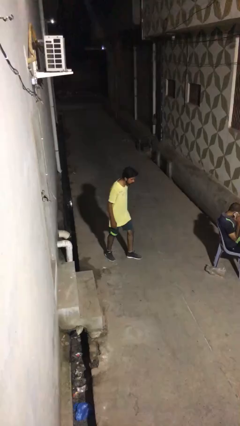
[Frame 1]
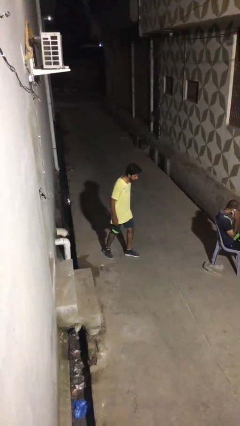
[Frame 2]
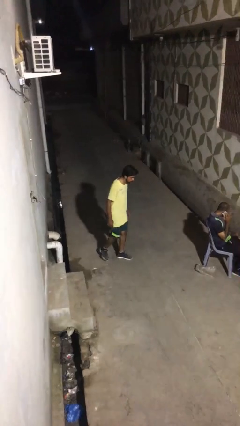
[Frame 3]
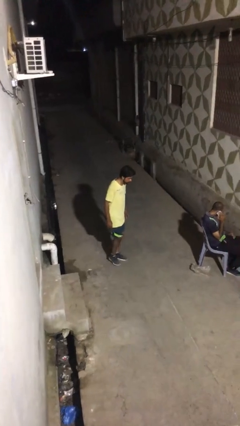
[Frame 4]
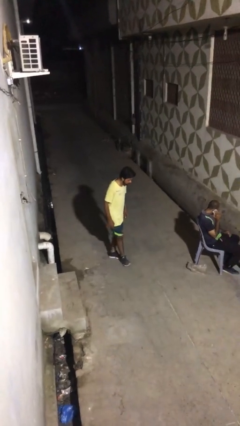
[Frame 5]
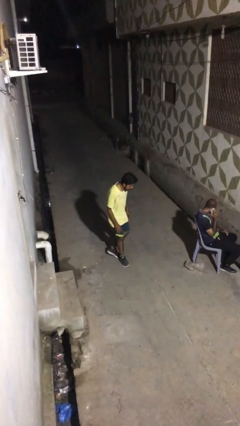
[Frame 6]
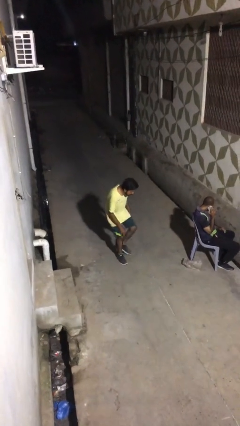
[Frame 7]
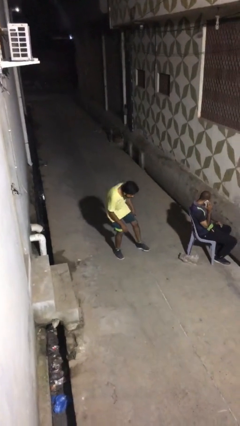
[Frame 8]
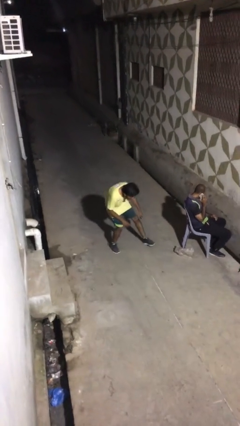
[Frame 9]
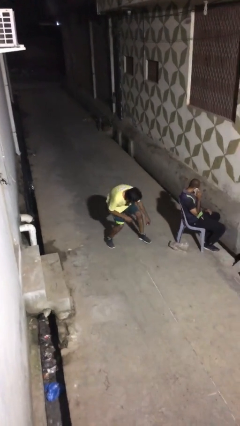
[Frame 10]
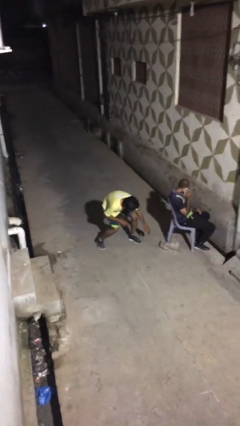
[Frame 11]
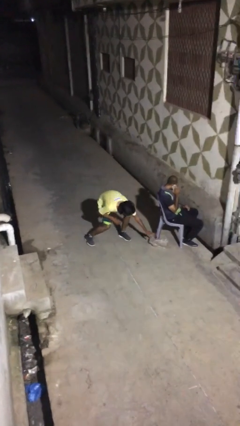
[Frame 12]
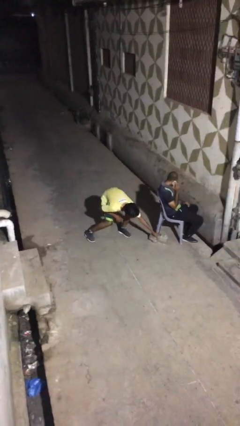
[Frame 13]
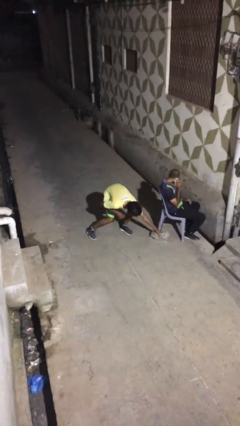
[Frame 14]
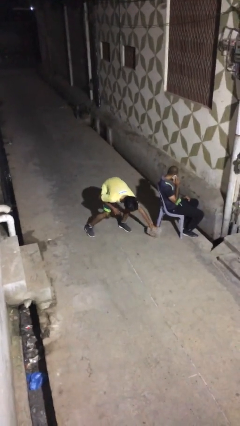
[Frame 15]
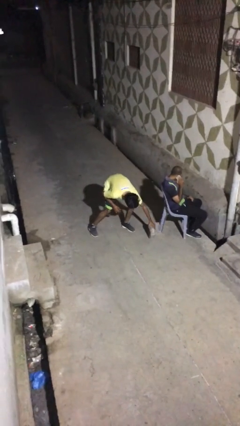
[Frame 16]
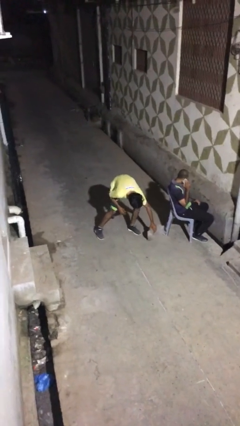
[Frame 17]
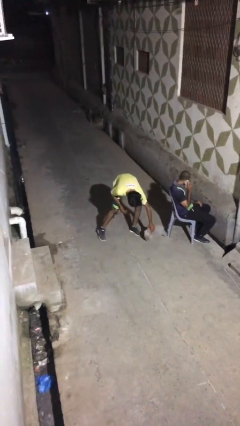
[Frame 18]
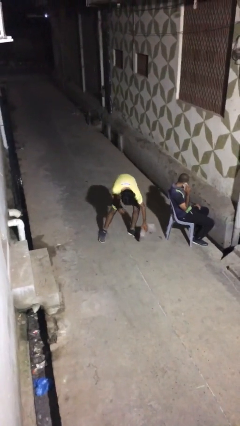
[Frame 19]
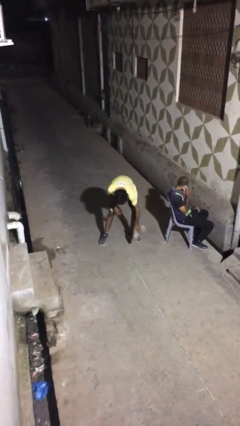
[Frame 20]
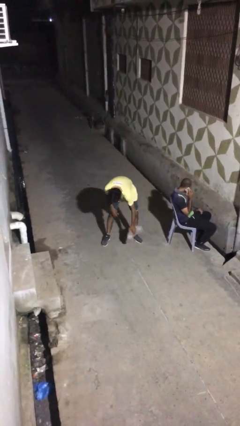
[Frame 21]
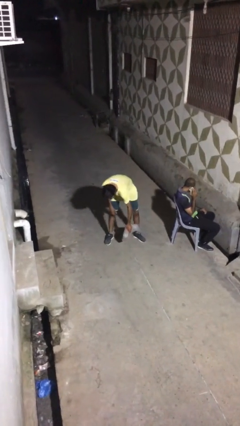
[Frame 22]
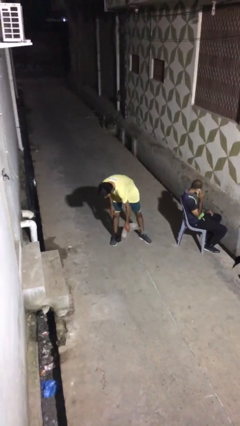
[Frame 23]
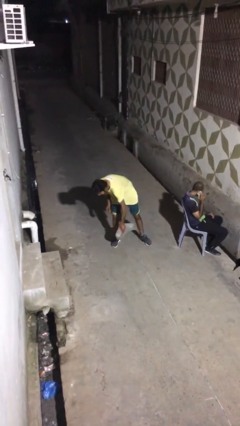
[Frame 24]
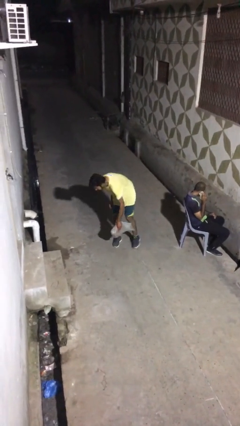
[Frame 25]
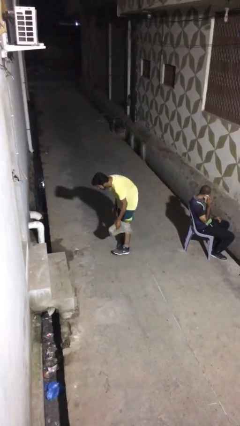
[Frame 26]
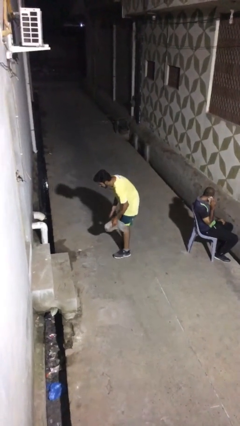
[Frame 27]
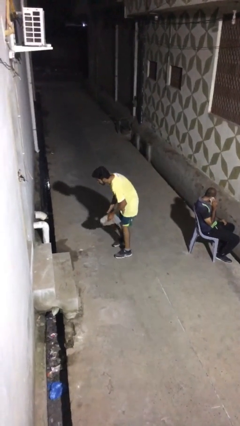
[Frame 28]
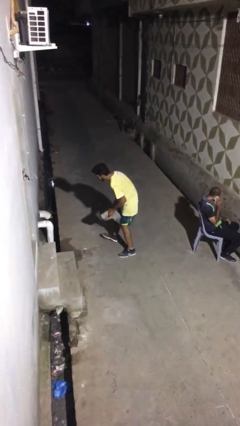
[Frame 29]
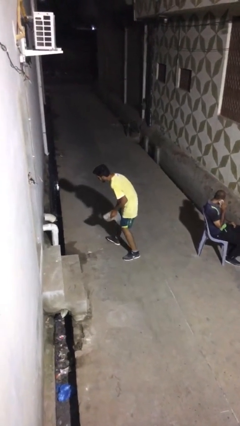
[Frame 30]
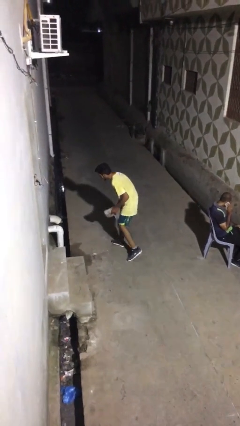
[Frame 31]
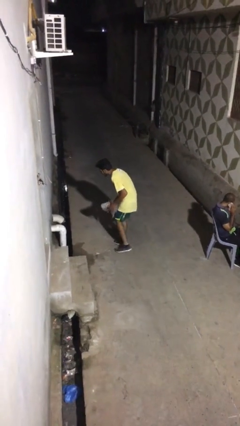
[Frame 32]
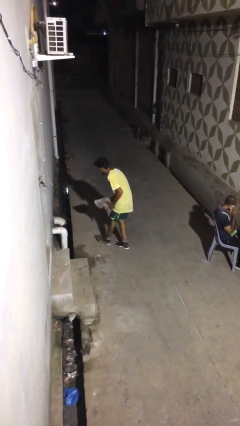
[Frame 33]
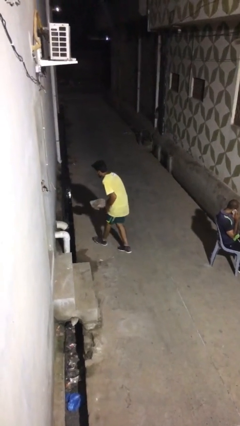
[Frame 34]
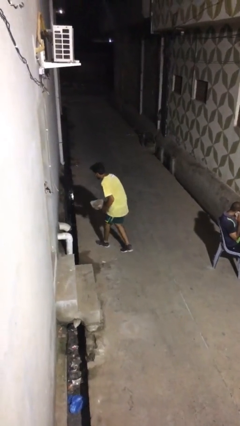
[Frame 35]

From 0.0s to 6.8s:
person steals object from person

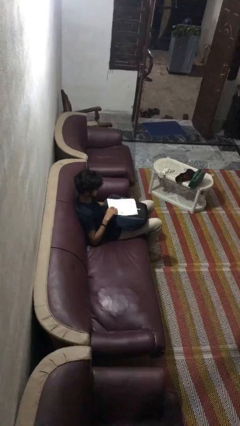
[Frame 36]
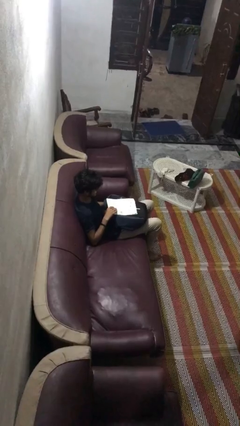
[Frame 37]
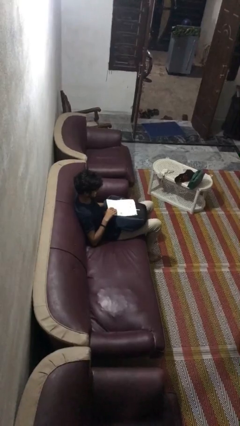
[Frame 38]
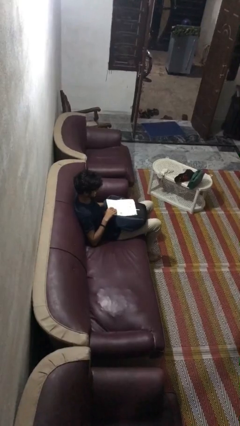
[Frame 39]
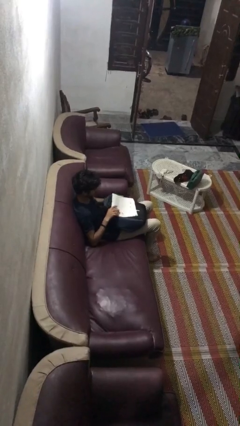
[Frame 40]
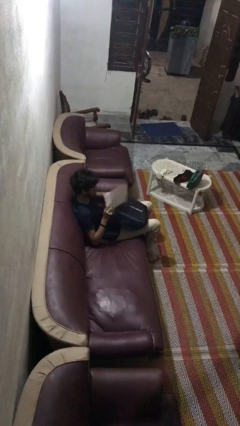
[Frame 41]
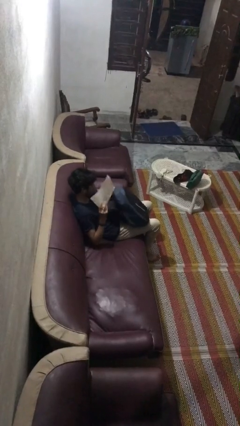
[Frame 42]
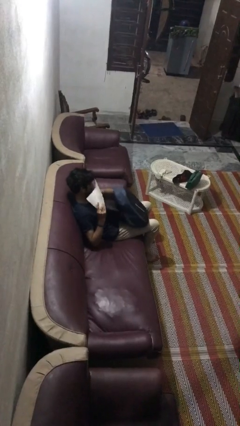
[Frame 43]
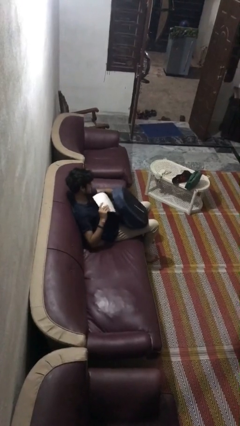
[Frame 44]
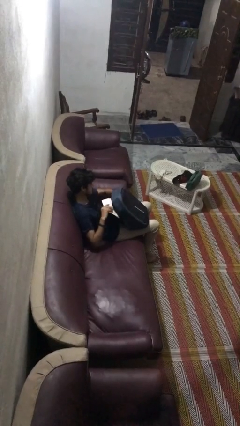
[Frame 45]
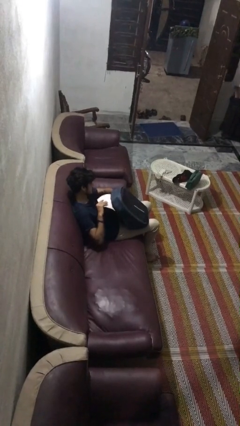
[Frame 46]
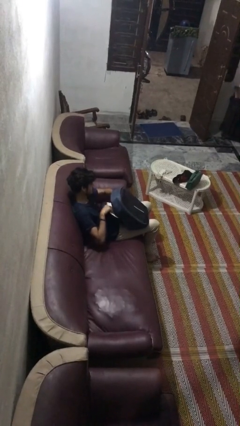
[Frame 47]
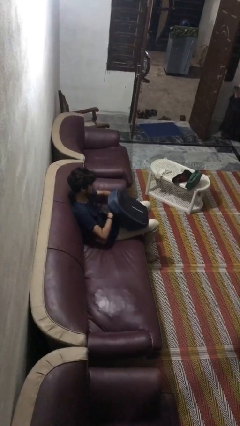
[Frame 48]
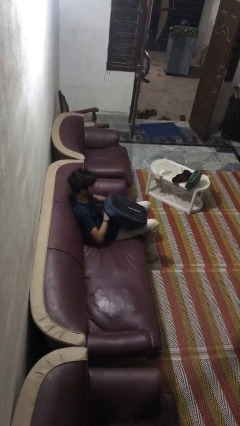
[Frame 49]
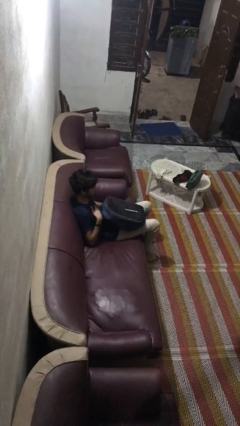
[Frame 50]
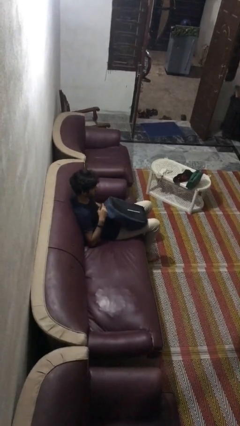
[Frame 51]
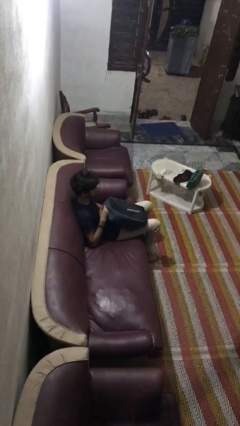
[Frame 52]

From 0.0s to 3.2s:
person puts object into backpack

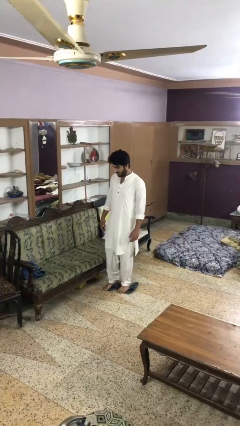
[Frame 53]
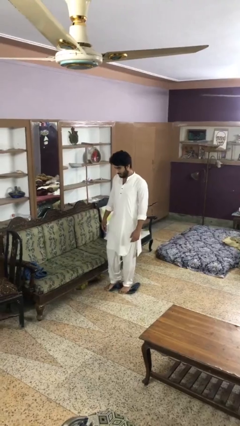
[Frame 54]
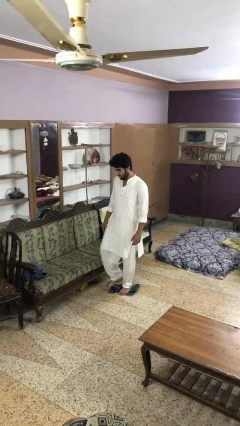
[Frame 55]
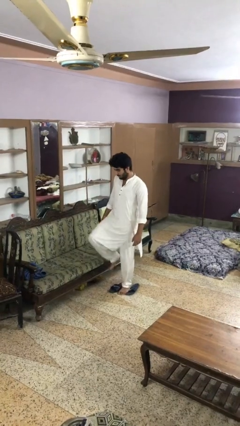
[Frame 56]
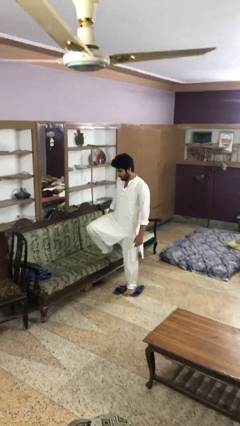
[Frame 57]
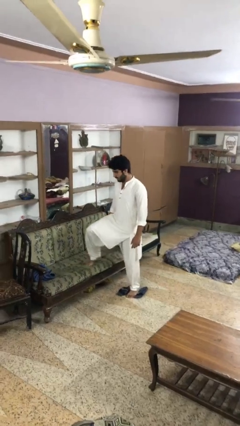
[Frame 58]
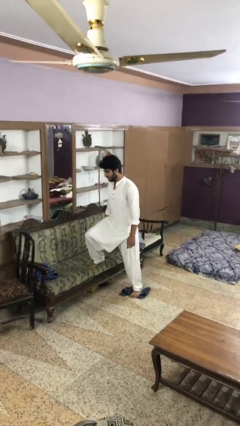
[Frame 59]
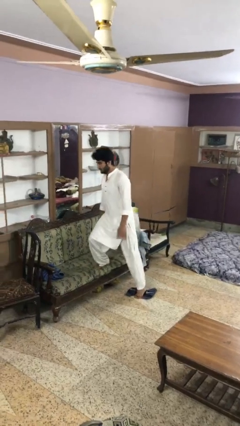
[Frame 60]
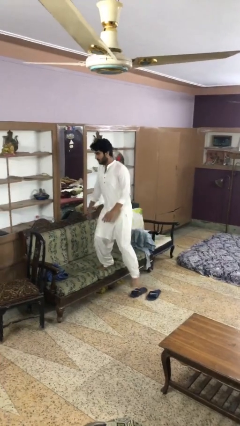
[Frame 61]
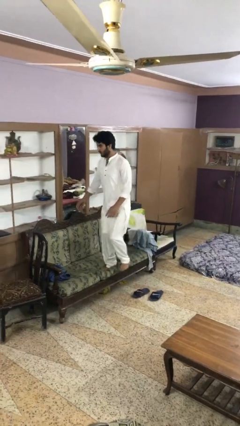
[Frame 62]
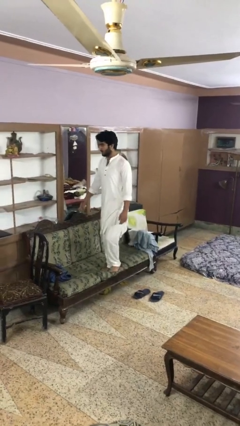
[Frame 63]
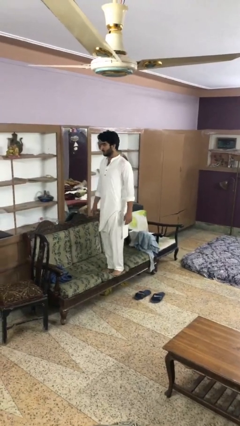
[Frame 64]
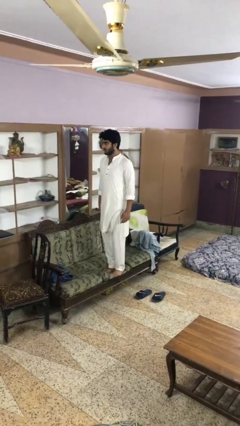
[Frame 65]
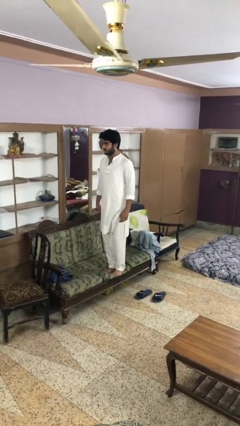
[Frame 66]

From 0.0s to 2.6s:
person climbs on couch

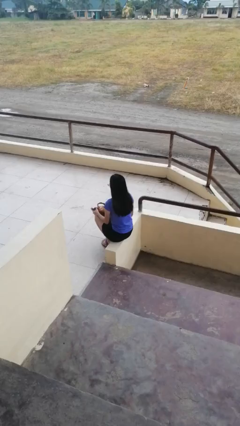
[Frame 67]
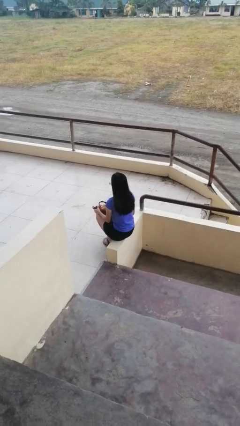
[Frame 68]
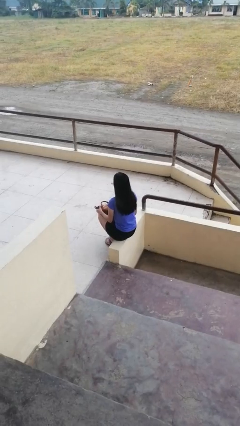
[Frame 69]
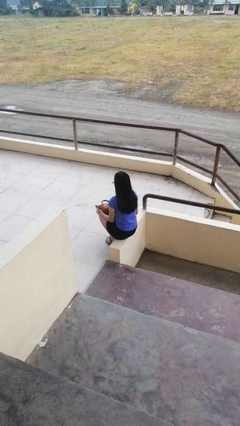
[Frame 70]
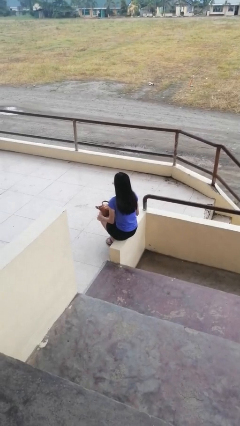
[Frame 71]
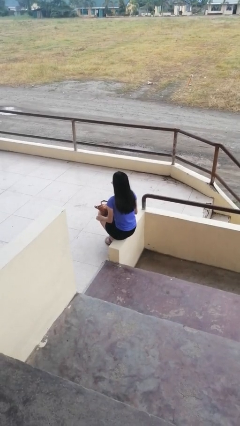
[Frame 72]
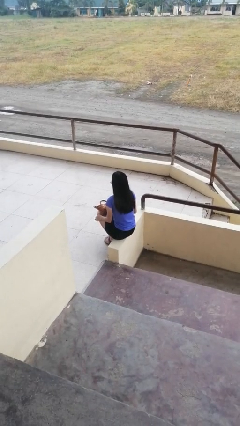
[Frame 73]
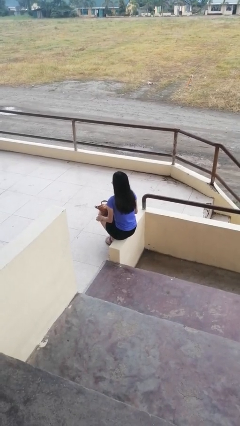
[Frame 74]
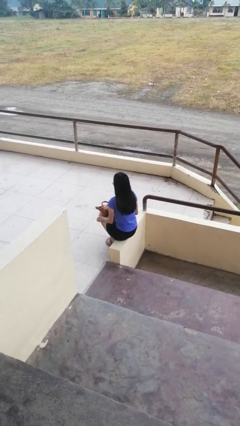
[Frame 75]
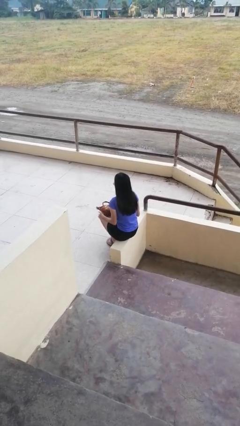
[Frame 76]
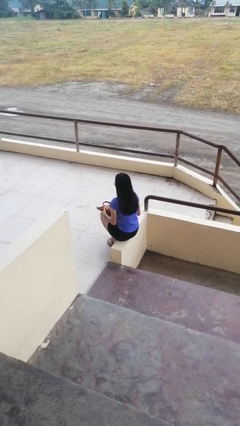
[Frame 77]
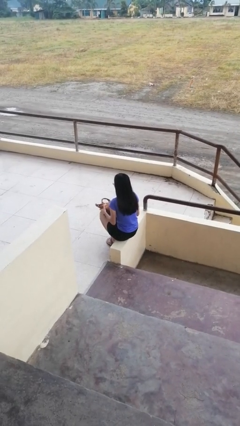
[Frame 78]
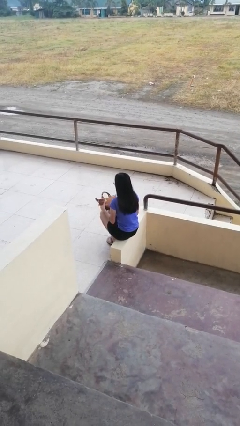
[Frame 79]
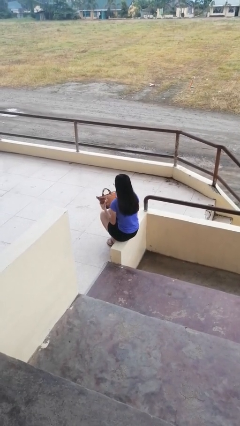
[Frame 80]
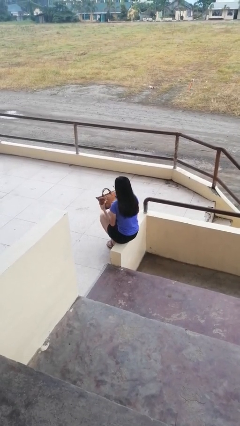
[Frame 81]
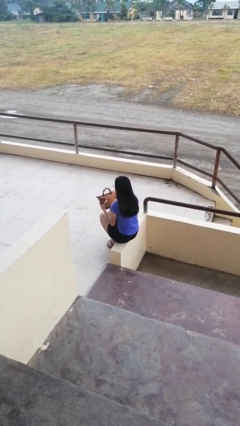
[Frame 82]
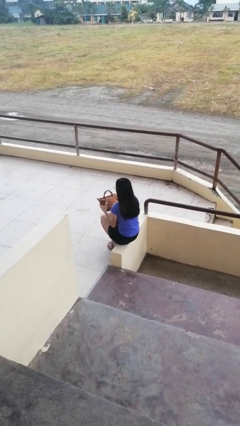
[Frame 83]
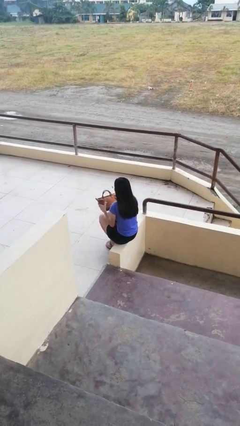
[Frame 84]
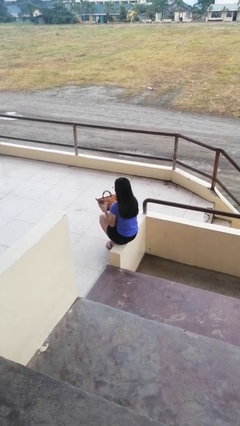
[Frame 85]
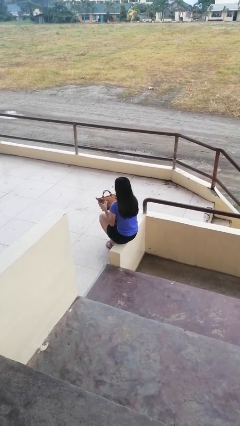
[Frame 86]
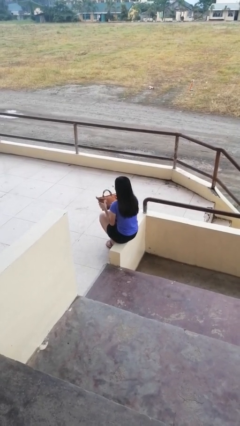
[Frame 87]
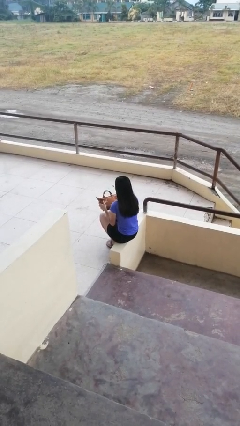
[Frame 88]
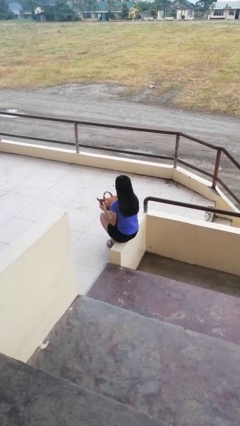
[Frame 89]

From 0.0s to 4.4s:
person taps object with finger

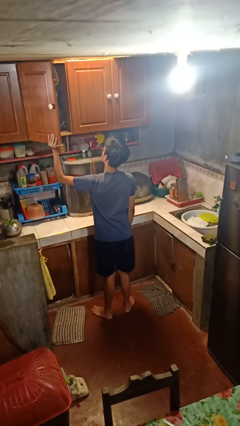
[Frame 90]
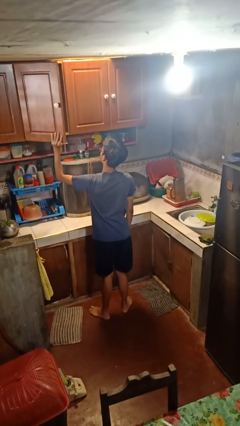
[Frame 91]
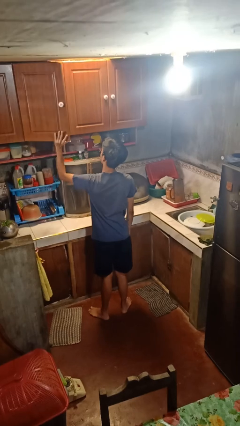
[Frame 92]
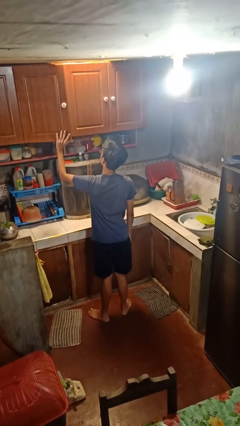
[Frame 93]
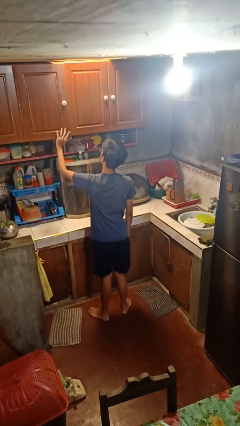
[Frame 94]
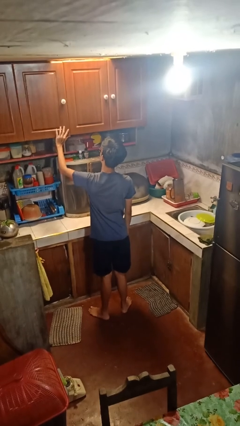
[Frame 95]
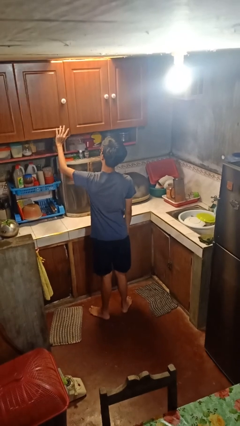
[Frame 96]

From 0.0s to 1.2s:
person closes cabinet
